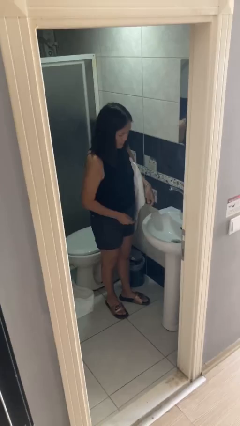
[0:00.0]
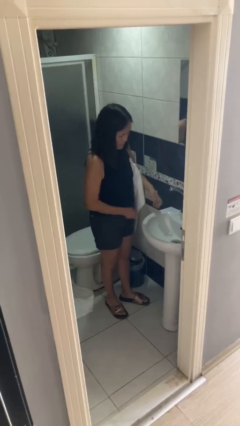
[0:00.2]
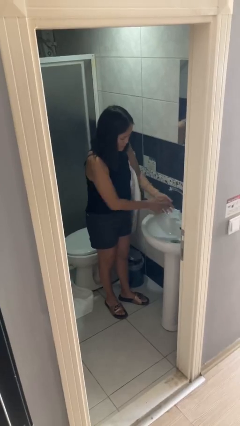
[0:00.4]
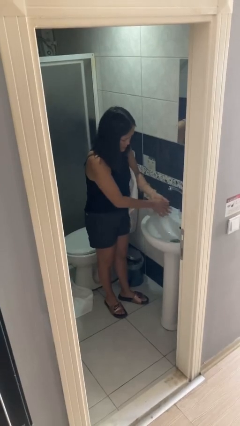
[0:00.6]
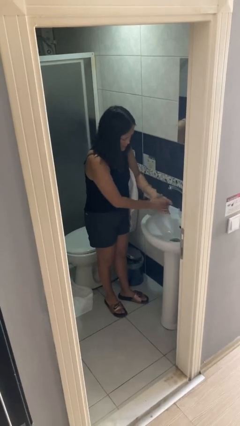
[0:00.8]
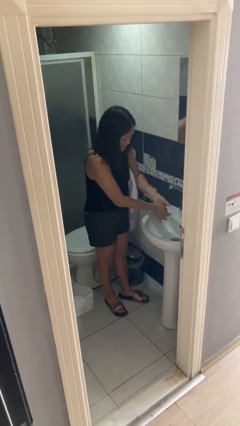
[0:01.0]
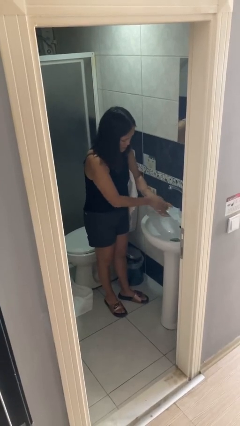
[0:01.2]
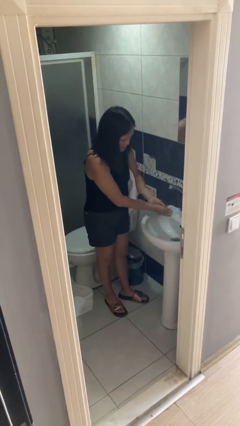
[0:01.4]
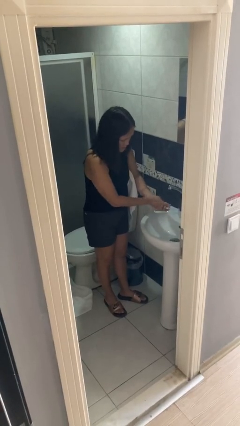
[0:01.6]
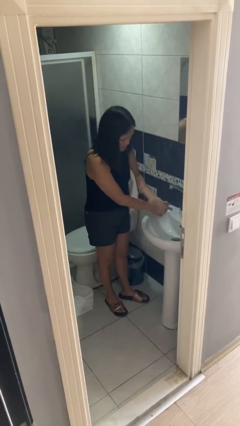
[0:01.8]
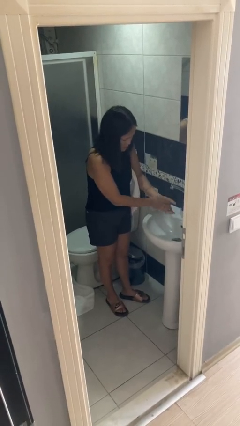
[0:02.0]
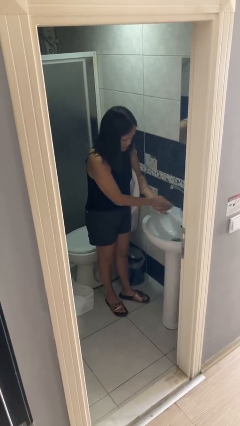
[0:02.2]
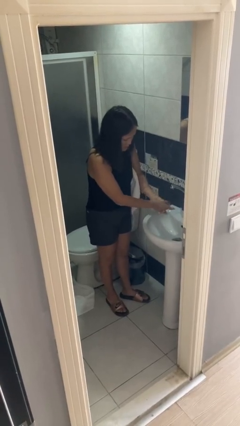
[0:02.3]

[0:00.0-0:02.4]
person washes hands

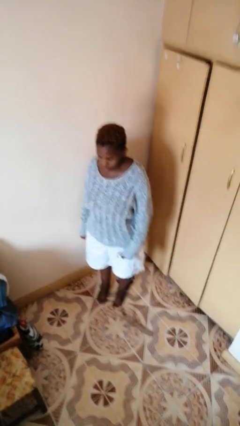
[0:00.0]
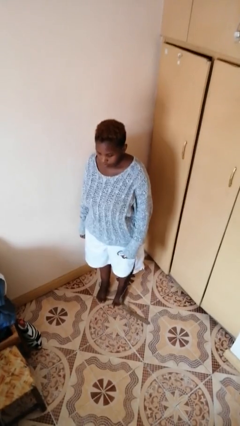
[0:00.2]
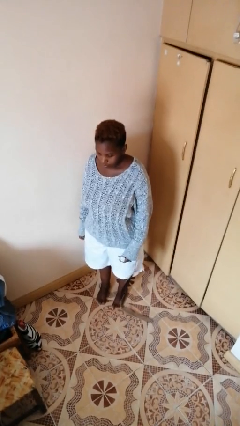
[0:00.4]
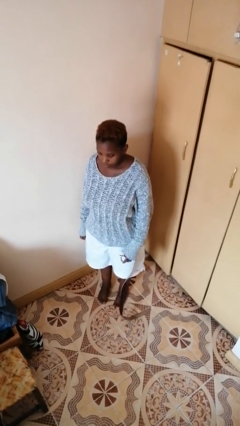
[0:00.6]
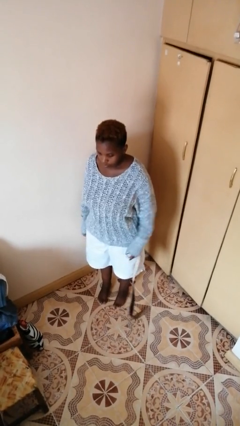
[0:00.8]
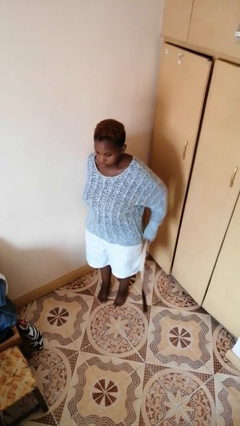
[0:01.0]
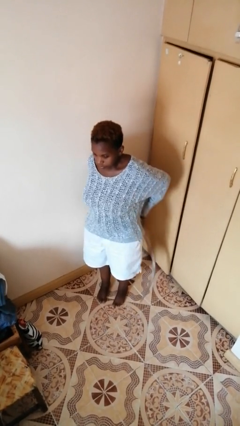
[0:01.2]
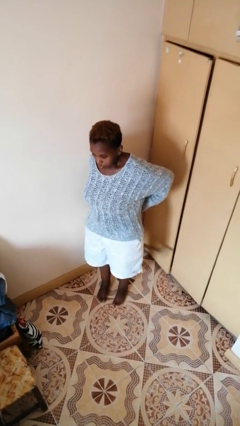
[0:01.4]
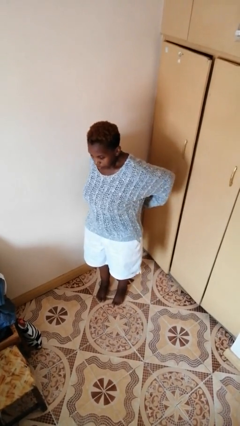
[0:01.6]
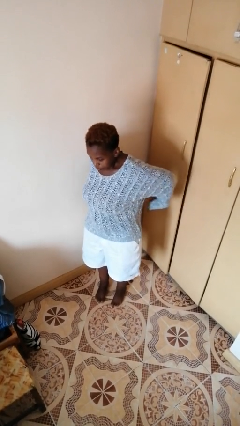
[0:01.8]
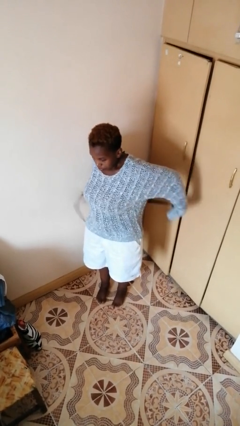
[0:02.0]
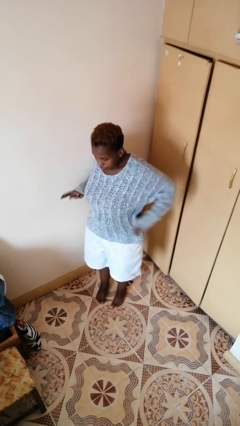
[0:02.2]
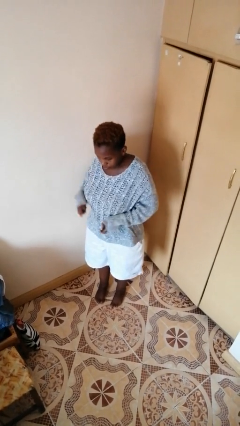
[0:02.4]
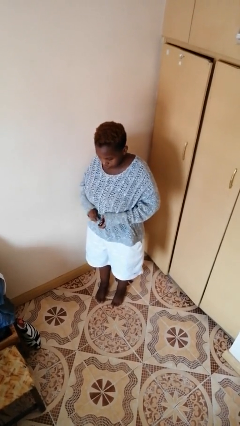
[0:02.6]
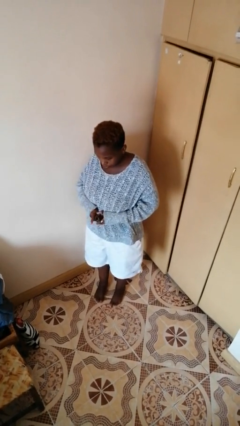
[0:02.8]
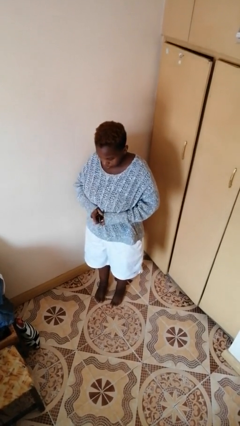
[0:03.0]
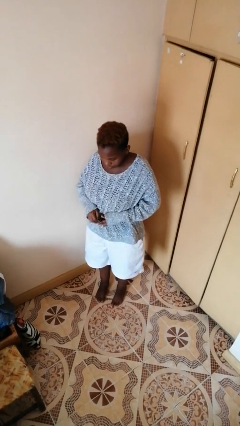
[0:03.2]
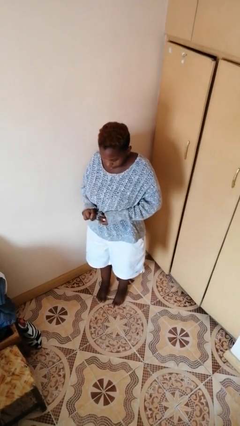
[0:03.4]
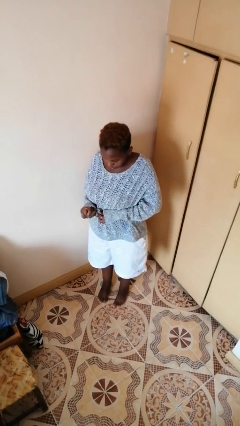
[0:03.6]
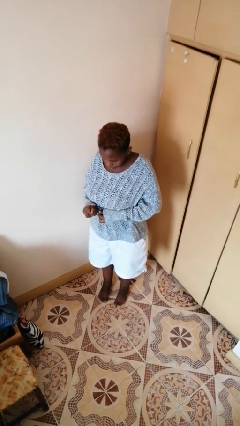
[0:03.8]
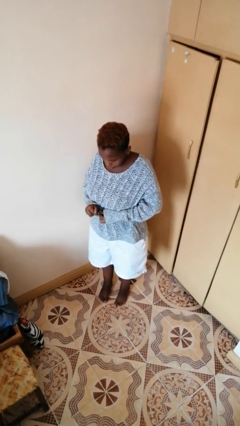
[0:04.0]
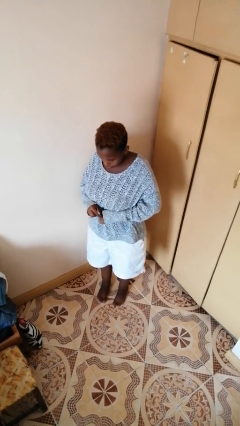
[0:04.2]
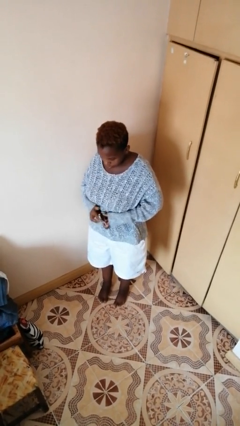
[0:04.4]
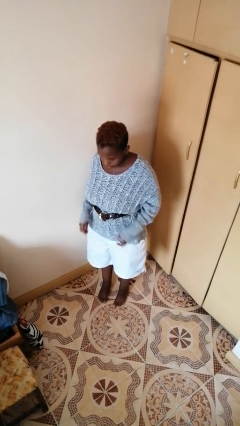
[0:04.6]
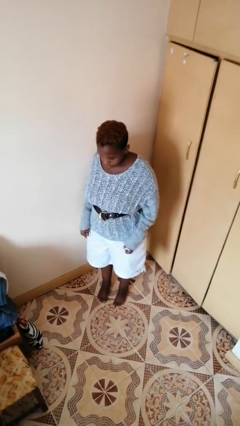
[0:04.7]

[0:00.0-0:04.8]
person puts on belt

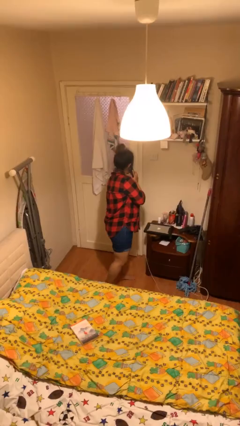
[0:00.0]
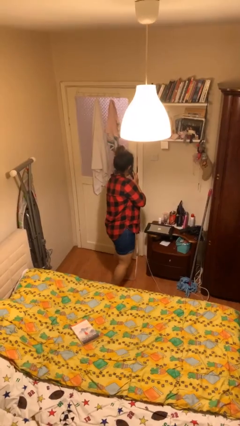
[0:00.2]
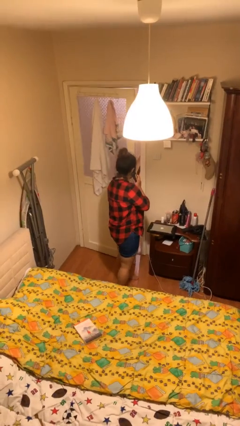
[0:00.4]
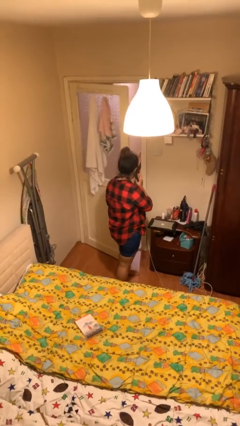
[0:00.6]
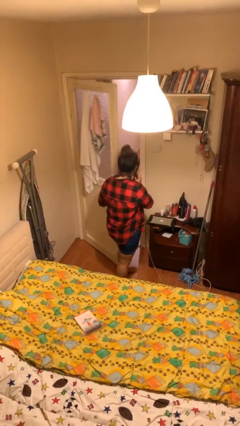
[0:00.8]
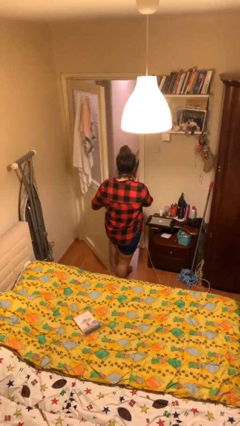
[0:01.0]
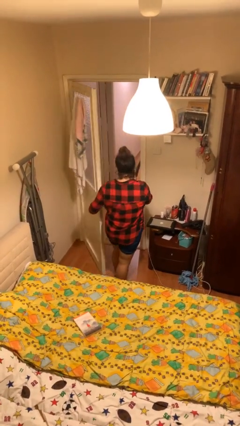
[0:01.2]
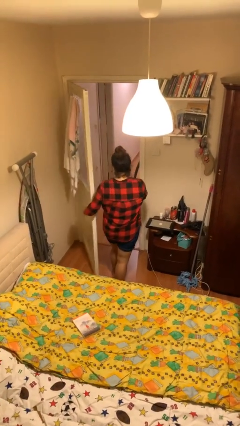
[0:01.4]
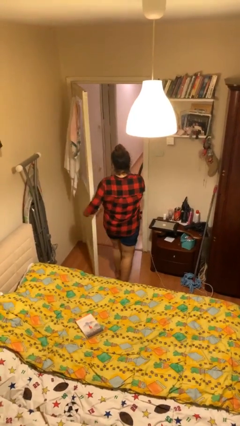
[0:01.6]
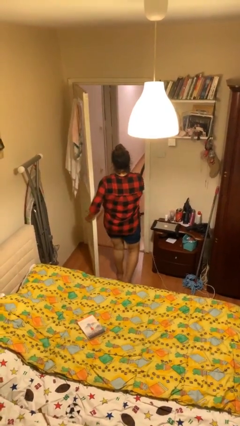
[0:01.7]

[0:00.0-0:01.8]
person opens facility door

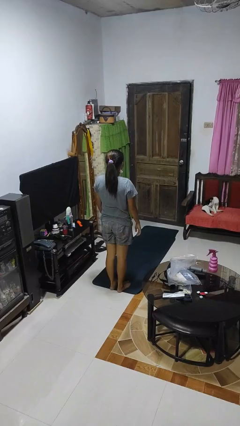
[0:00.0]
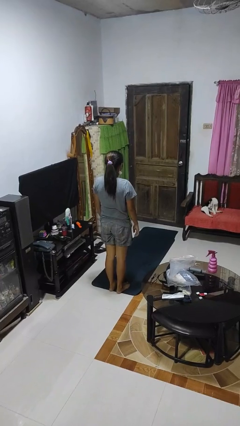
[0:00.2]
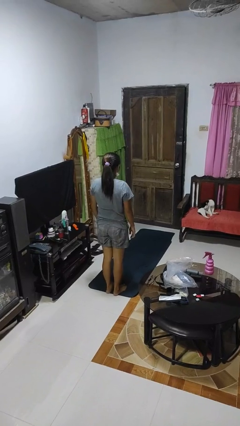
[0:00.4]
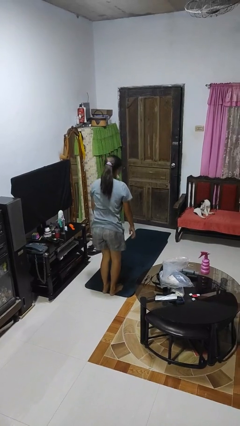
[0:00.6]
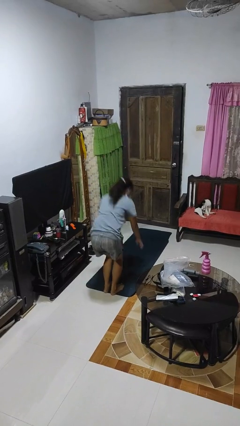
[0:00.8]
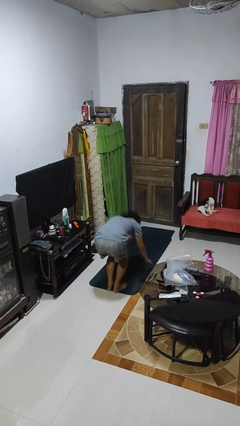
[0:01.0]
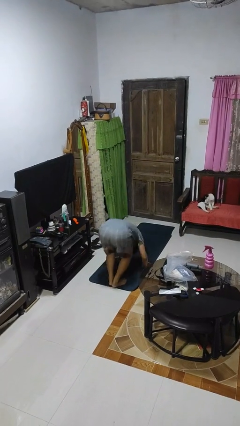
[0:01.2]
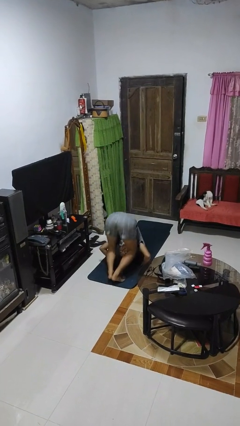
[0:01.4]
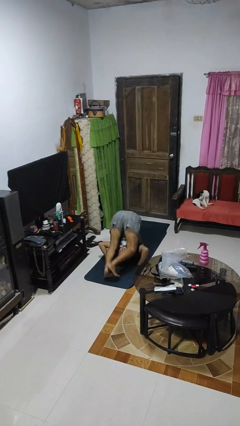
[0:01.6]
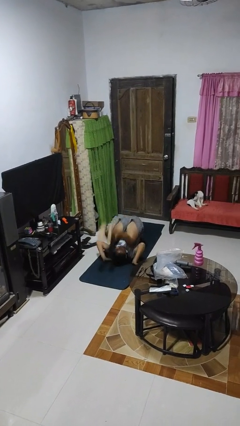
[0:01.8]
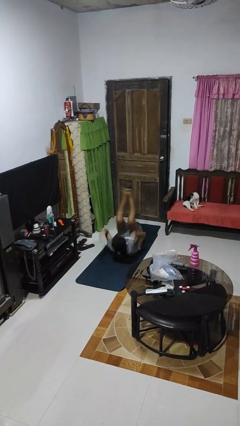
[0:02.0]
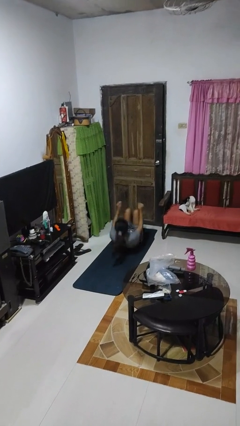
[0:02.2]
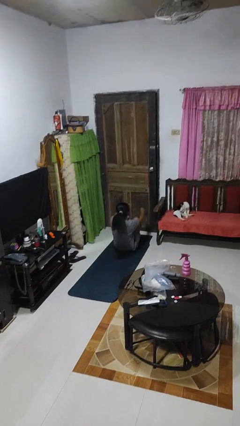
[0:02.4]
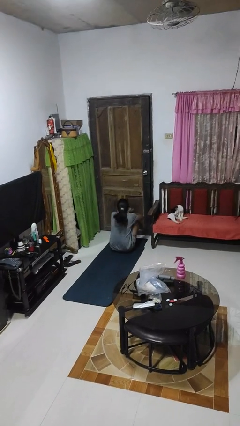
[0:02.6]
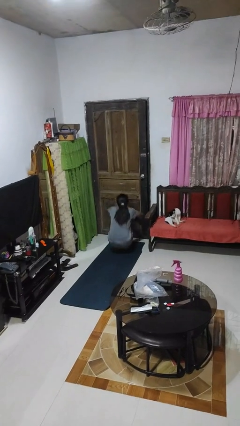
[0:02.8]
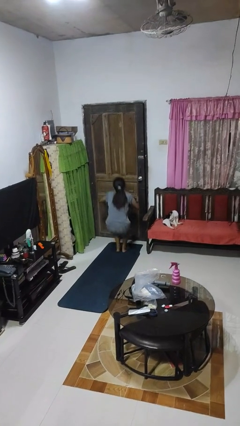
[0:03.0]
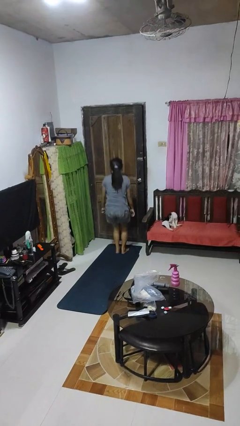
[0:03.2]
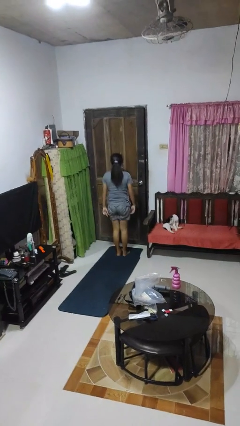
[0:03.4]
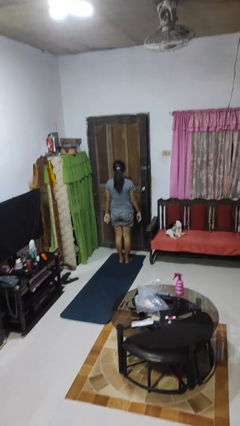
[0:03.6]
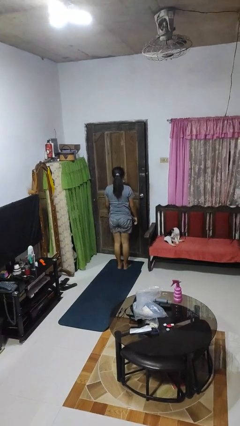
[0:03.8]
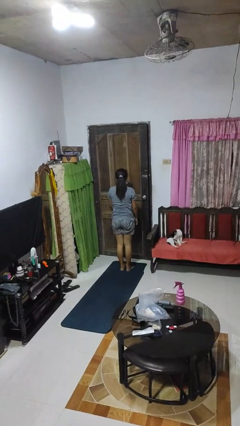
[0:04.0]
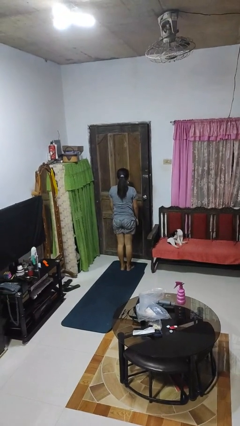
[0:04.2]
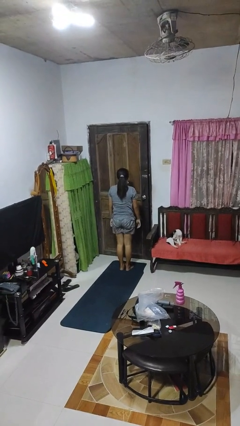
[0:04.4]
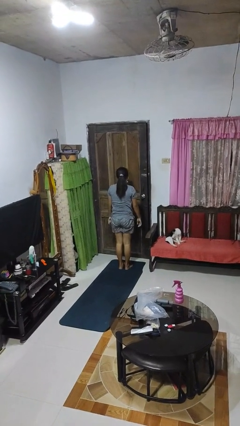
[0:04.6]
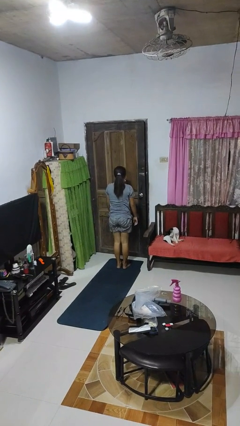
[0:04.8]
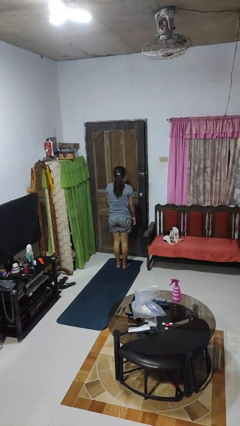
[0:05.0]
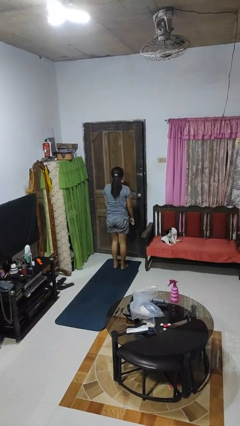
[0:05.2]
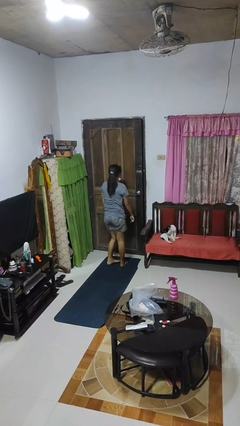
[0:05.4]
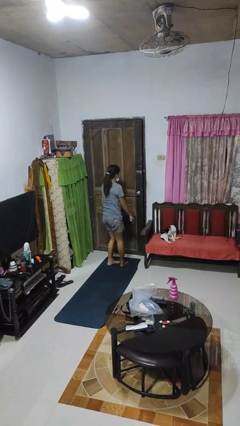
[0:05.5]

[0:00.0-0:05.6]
person somersaults

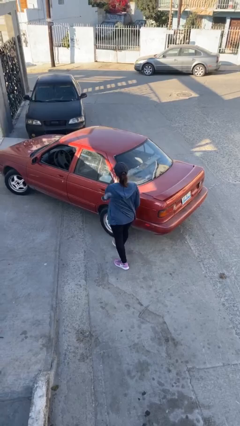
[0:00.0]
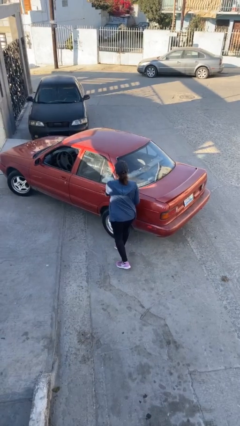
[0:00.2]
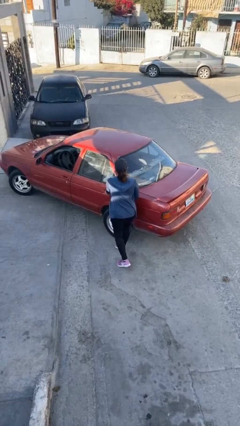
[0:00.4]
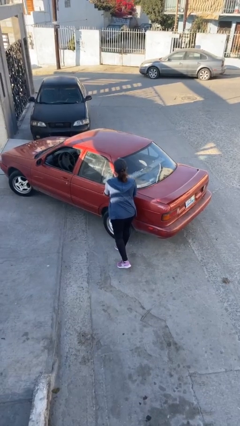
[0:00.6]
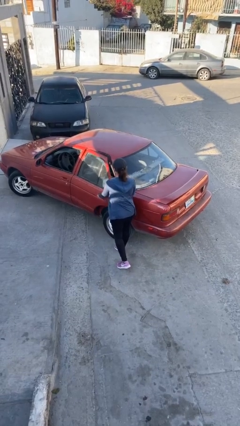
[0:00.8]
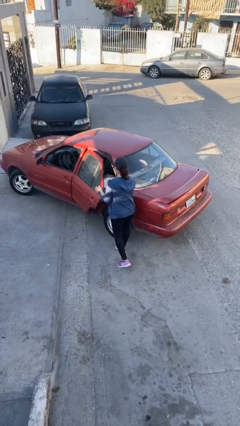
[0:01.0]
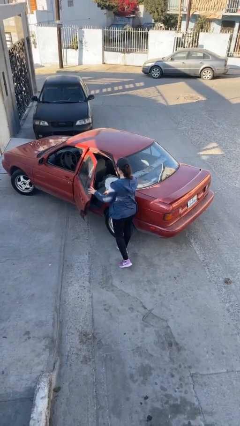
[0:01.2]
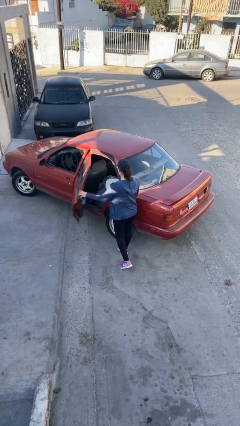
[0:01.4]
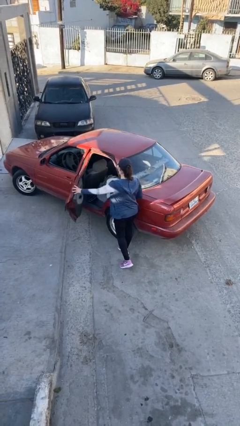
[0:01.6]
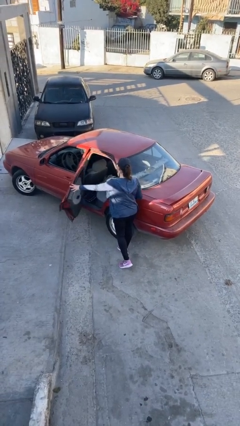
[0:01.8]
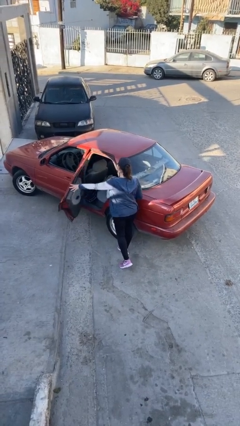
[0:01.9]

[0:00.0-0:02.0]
person opens car door

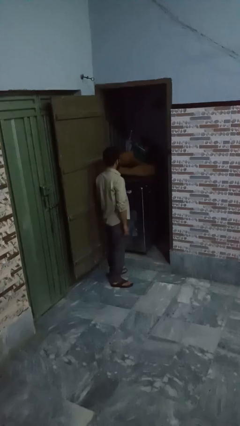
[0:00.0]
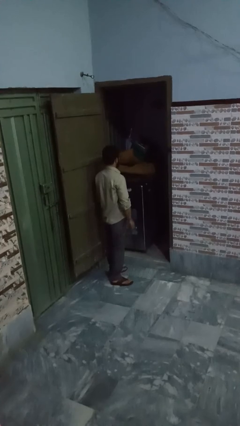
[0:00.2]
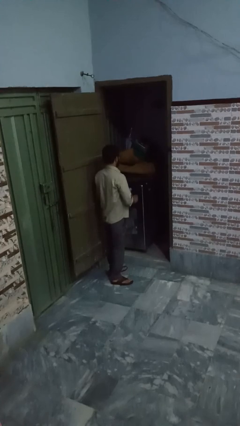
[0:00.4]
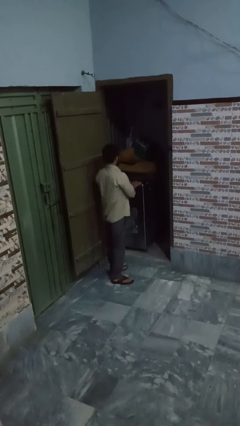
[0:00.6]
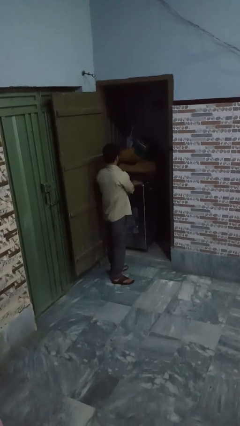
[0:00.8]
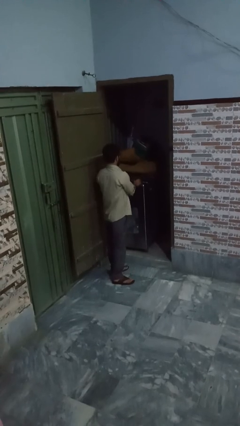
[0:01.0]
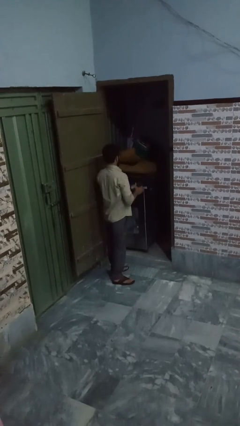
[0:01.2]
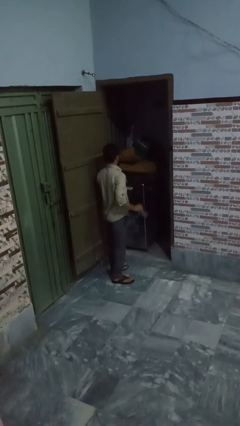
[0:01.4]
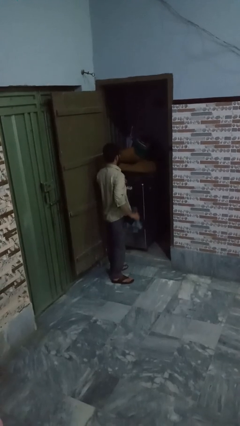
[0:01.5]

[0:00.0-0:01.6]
person unloads dryer
